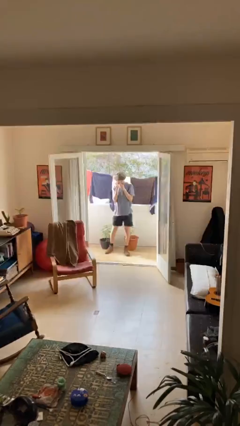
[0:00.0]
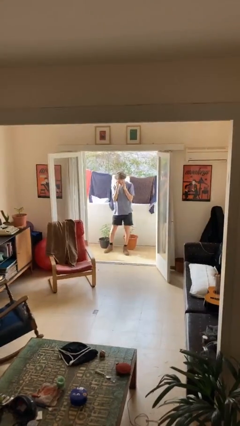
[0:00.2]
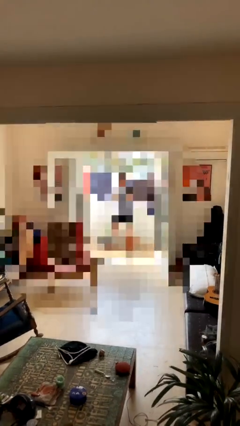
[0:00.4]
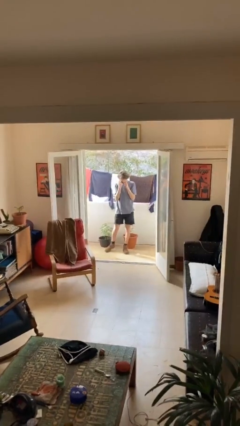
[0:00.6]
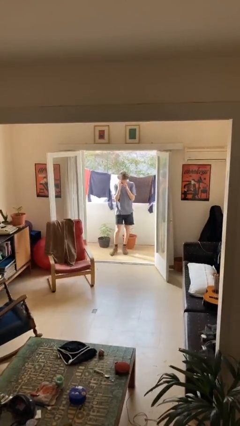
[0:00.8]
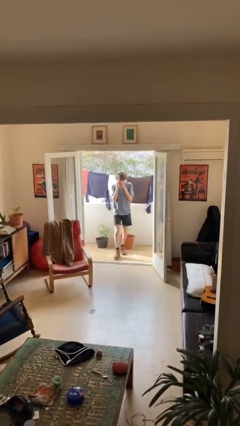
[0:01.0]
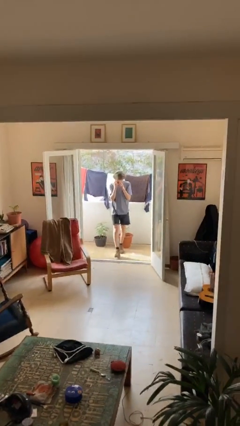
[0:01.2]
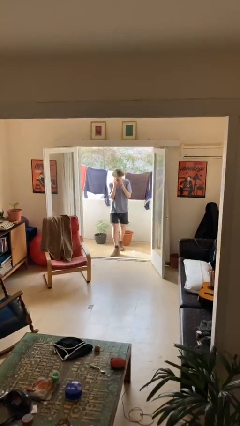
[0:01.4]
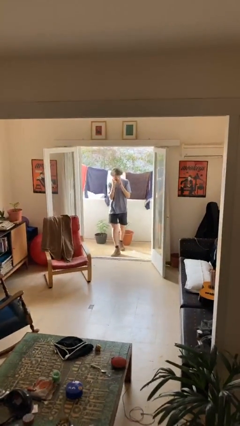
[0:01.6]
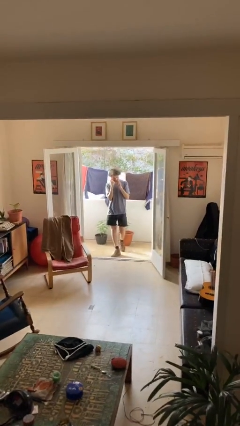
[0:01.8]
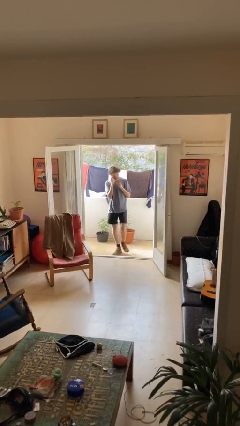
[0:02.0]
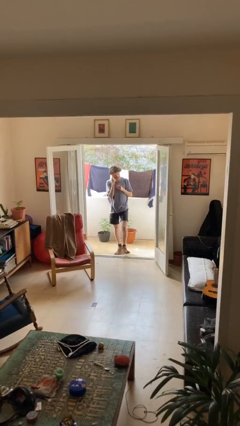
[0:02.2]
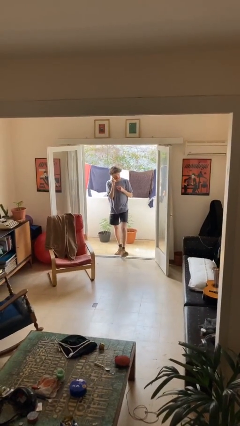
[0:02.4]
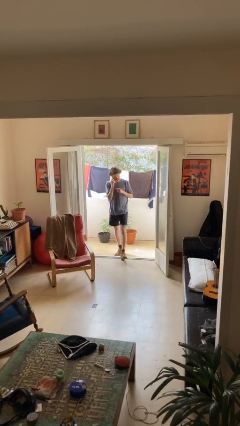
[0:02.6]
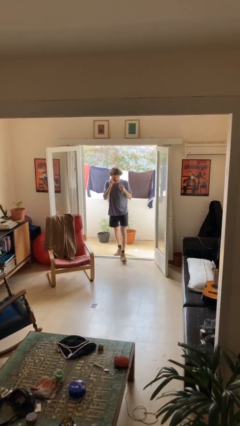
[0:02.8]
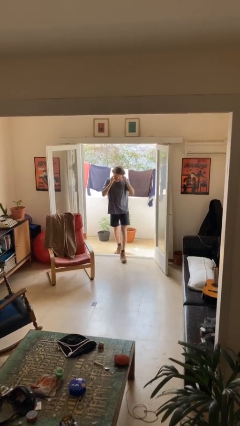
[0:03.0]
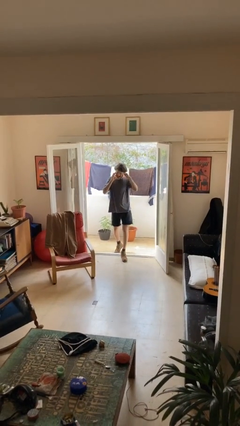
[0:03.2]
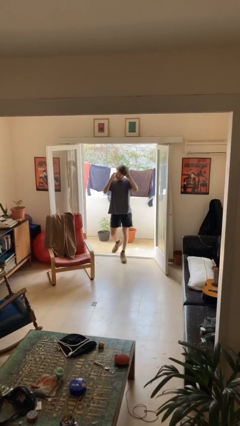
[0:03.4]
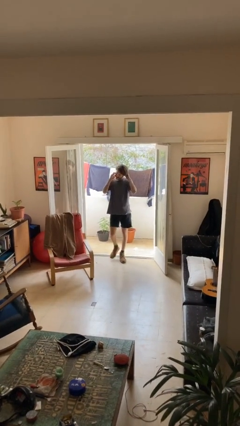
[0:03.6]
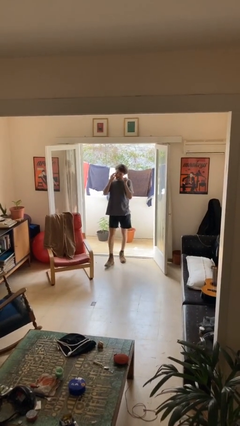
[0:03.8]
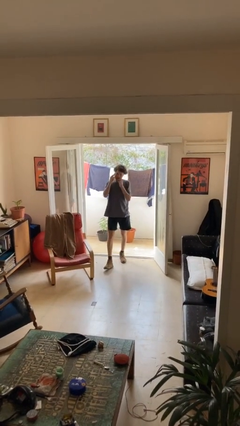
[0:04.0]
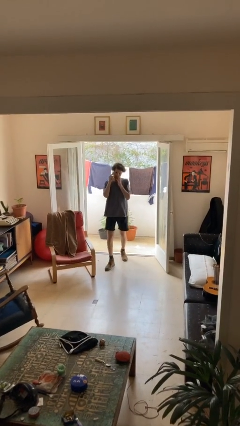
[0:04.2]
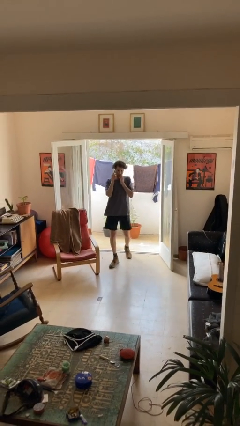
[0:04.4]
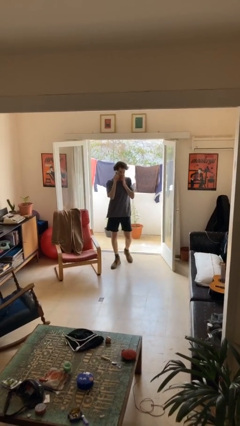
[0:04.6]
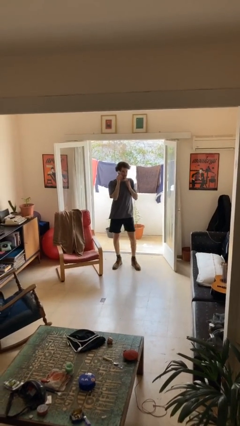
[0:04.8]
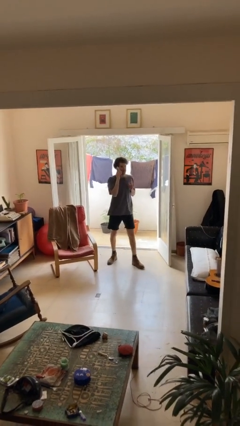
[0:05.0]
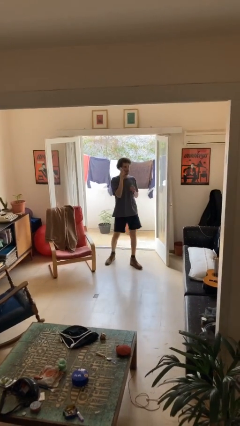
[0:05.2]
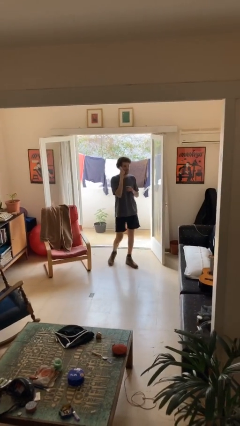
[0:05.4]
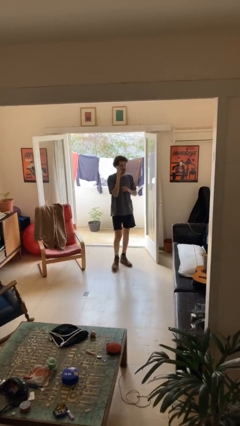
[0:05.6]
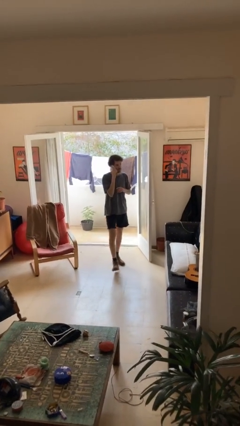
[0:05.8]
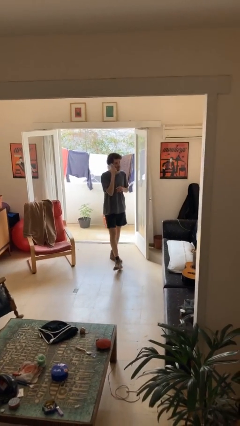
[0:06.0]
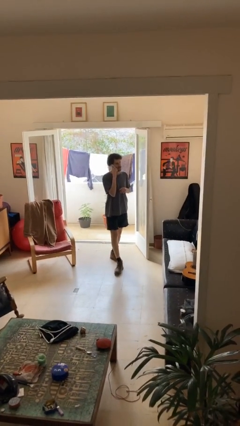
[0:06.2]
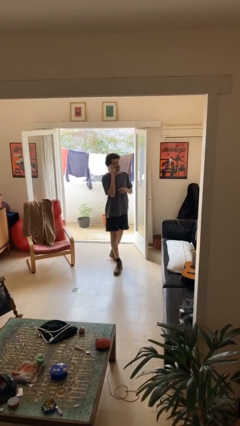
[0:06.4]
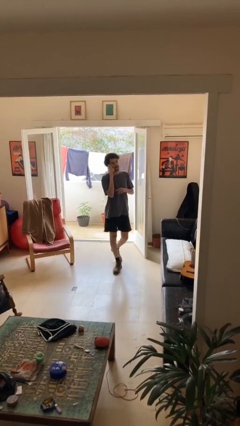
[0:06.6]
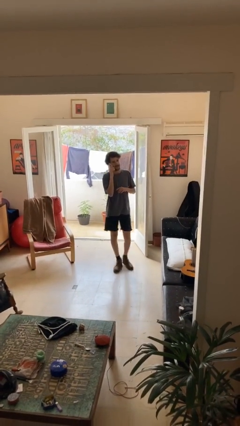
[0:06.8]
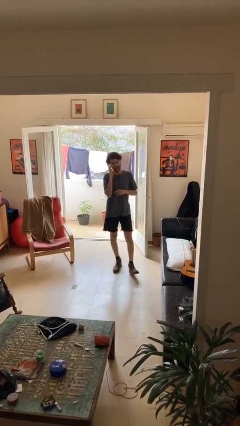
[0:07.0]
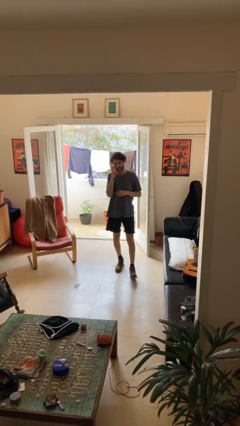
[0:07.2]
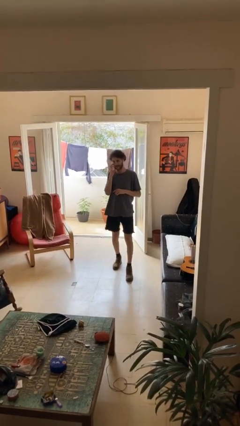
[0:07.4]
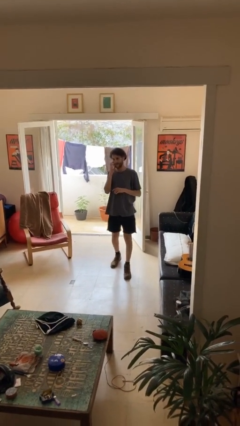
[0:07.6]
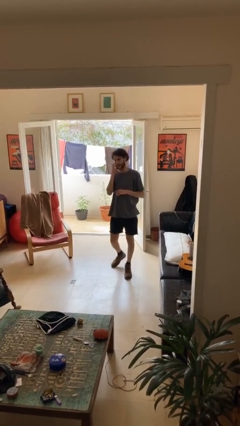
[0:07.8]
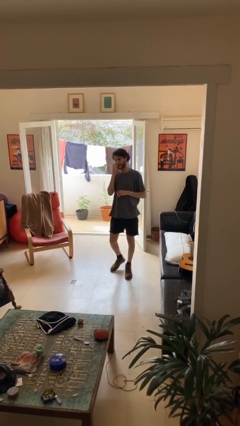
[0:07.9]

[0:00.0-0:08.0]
person enters scene through structure

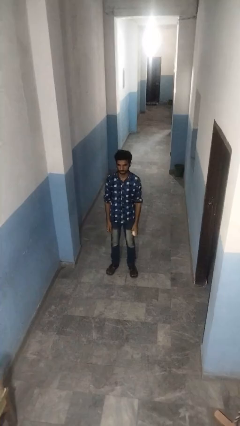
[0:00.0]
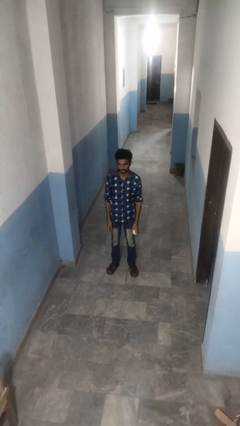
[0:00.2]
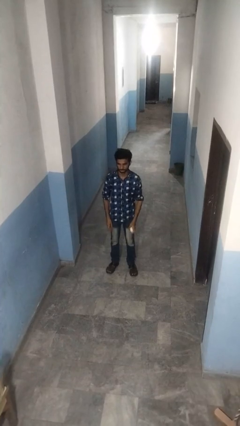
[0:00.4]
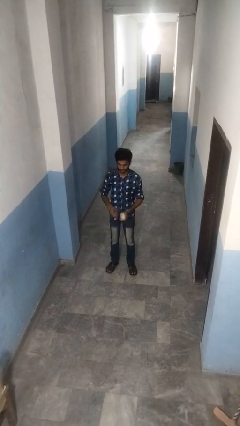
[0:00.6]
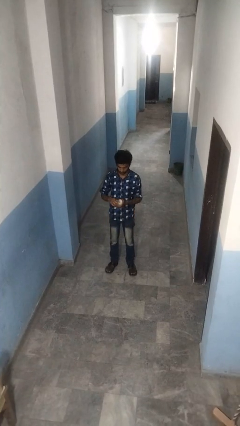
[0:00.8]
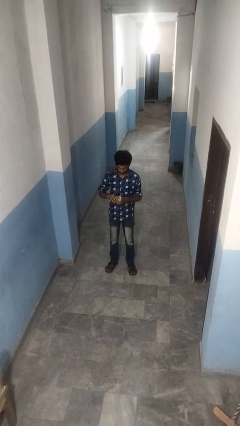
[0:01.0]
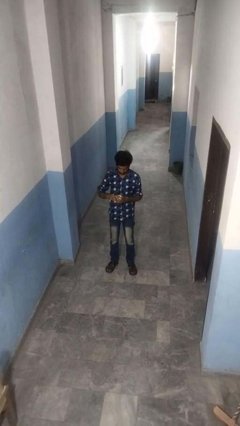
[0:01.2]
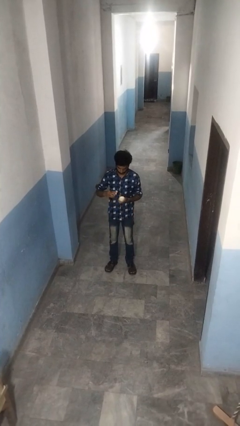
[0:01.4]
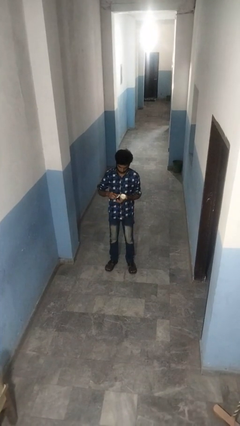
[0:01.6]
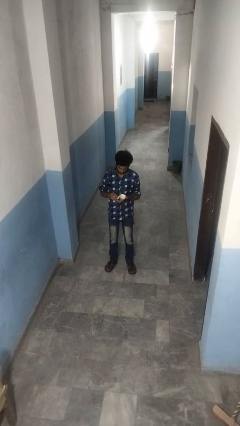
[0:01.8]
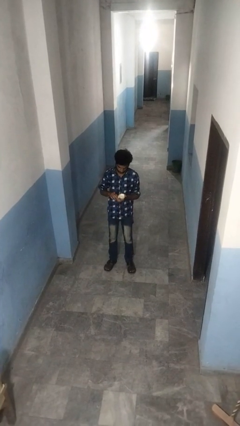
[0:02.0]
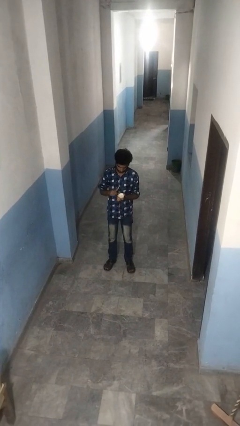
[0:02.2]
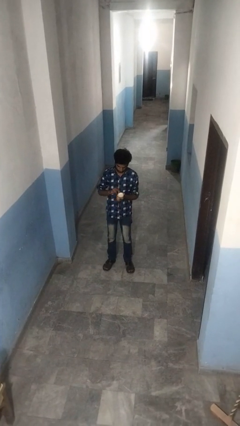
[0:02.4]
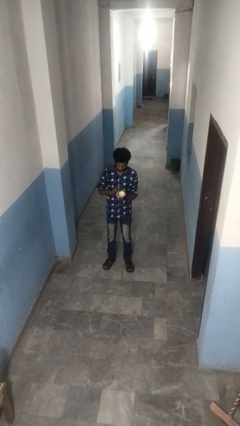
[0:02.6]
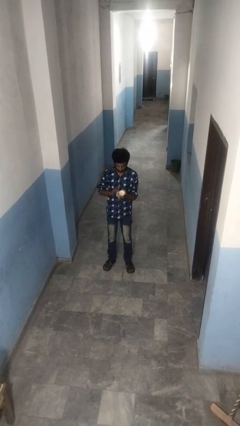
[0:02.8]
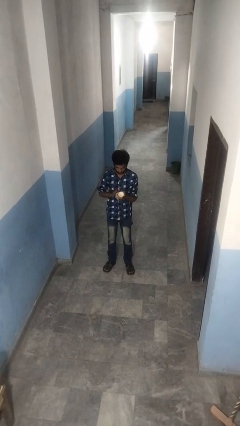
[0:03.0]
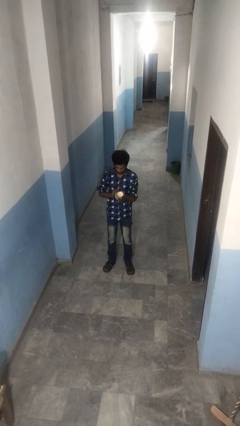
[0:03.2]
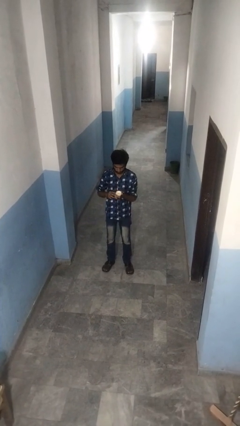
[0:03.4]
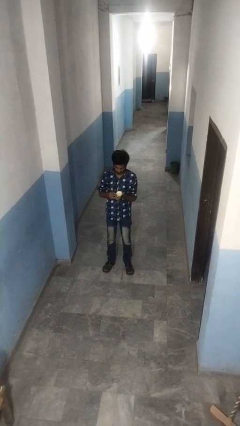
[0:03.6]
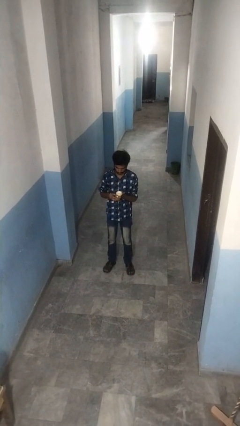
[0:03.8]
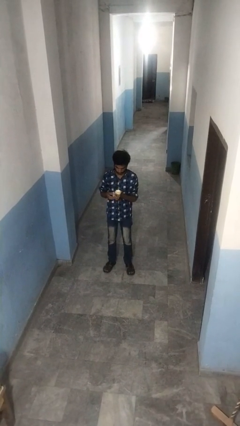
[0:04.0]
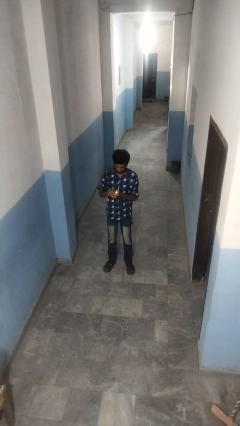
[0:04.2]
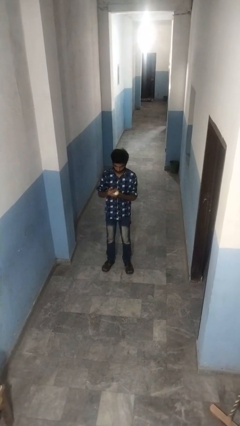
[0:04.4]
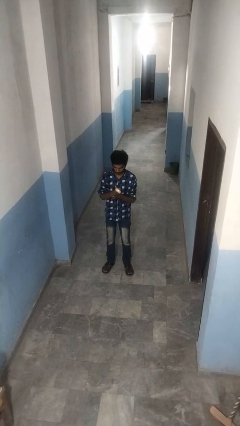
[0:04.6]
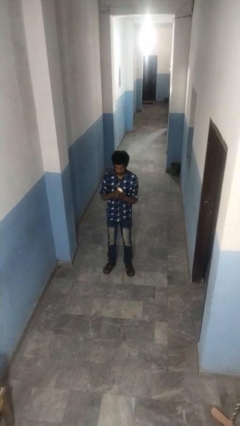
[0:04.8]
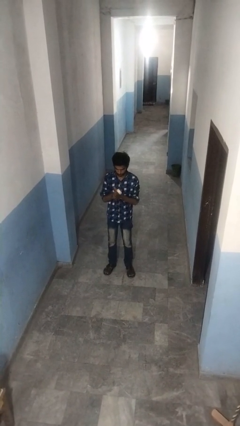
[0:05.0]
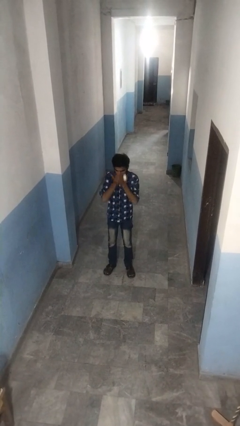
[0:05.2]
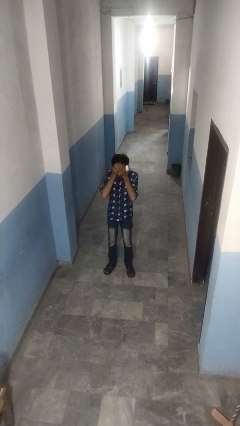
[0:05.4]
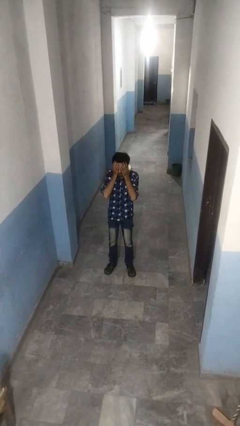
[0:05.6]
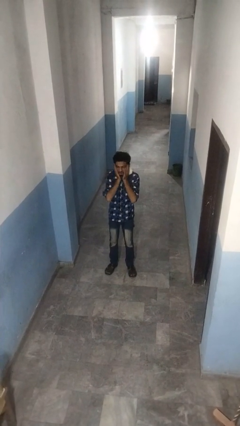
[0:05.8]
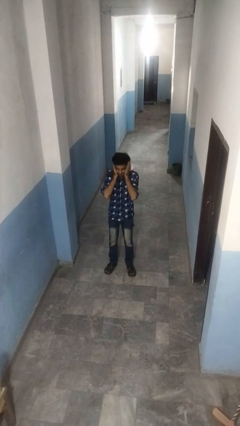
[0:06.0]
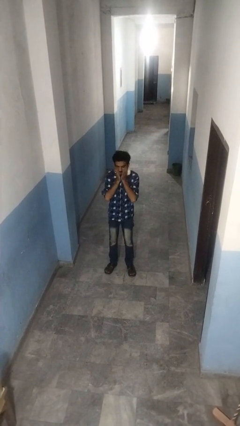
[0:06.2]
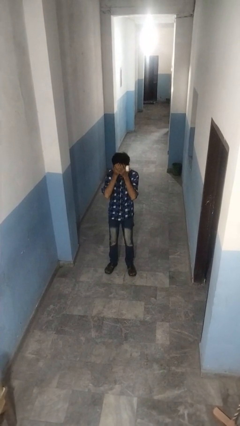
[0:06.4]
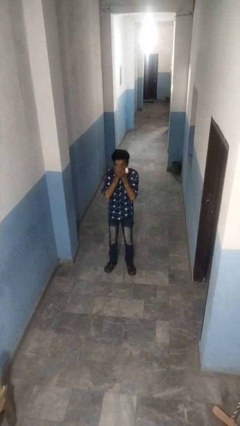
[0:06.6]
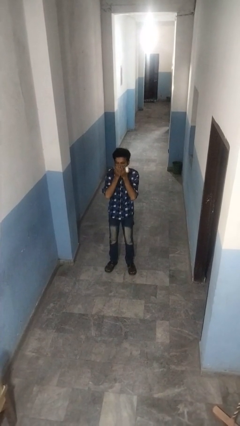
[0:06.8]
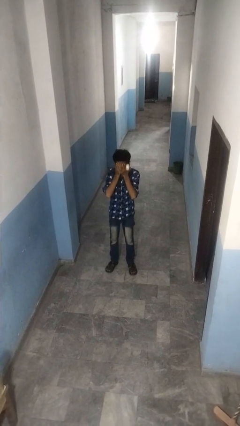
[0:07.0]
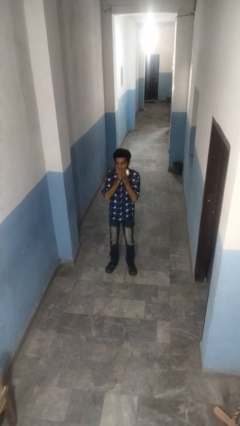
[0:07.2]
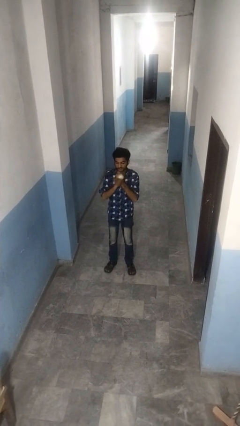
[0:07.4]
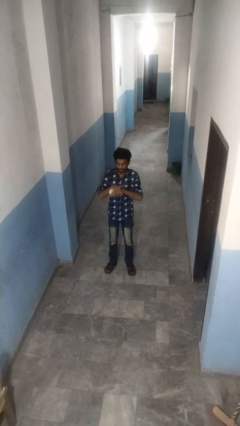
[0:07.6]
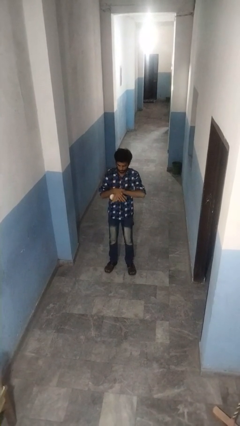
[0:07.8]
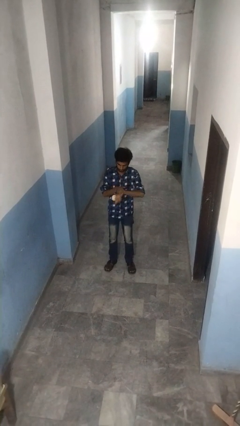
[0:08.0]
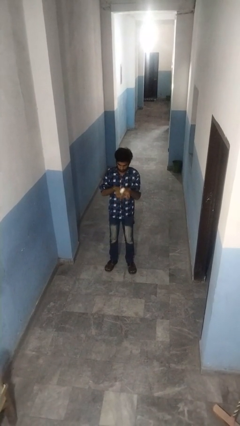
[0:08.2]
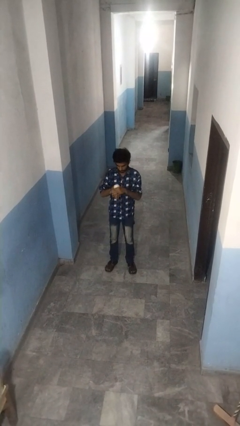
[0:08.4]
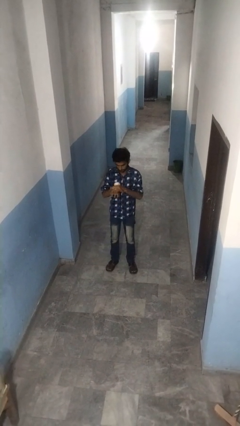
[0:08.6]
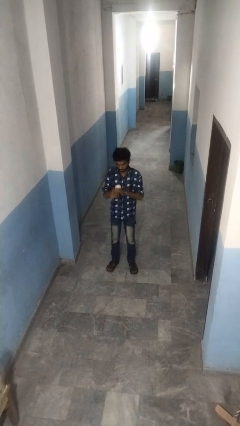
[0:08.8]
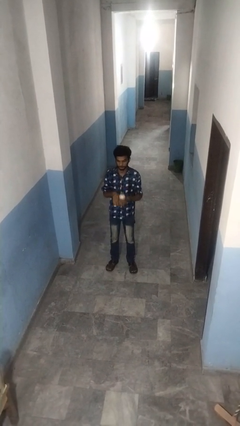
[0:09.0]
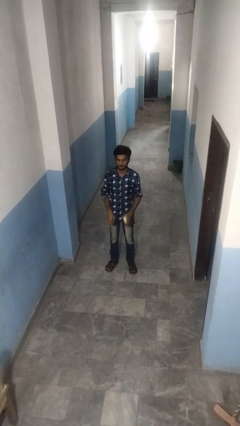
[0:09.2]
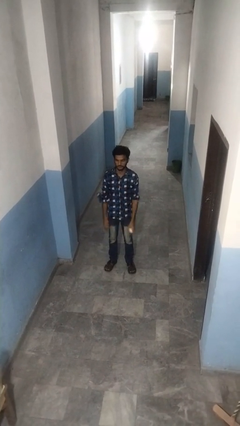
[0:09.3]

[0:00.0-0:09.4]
person applies facial moisturizer

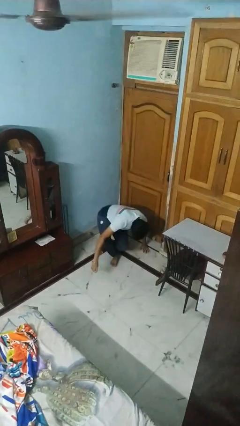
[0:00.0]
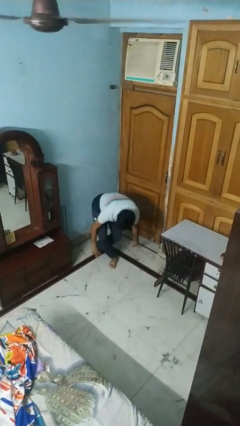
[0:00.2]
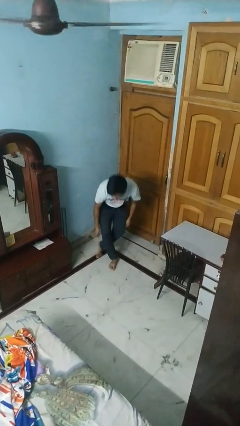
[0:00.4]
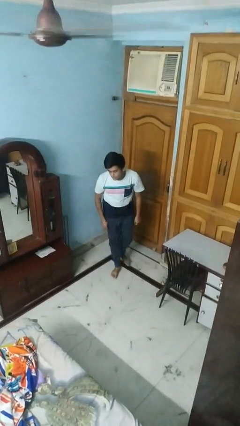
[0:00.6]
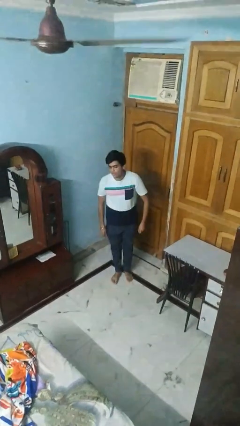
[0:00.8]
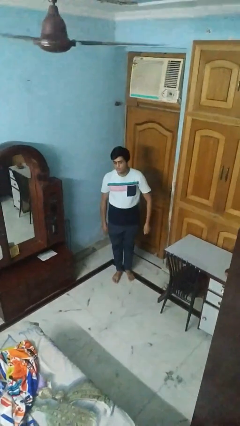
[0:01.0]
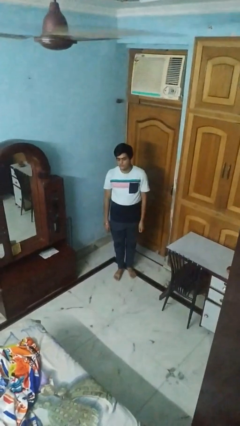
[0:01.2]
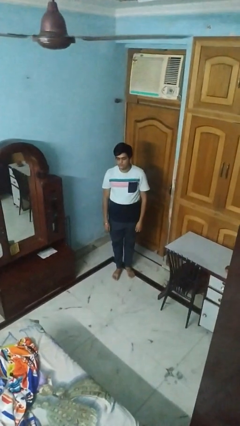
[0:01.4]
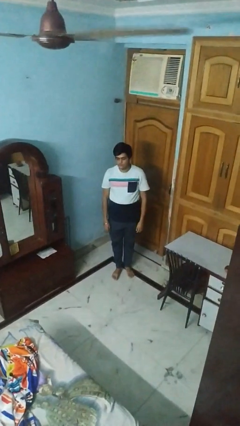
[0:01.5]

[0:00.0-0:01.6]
person stands up from floor
